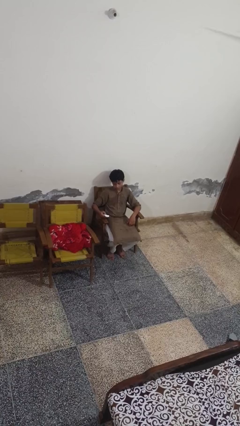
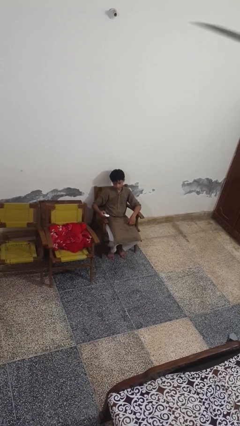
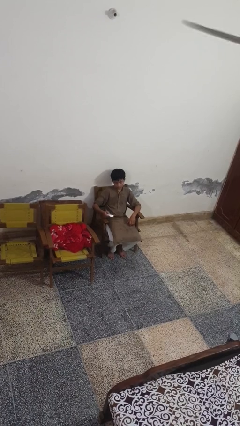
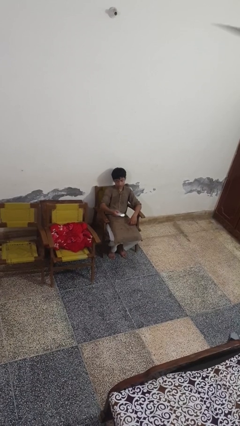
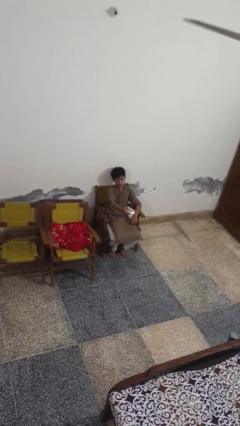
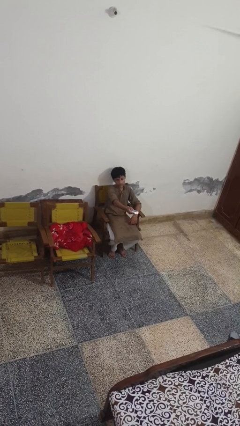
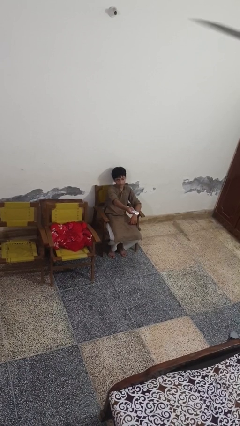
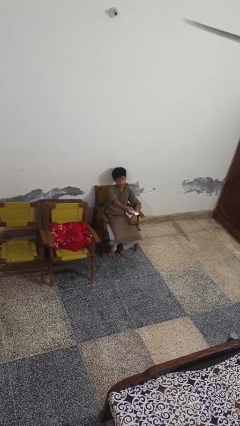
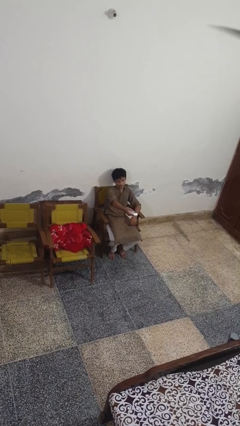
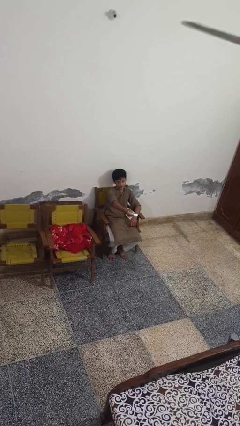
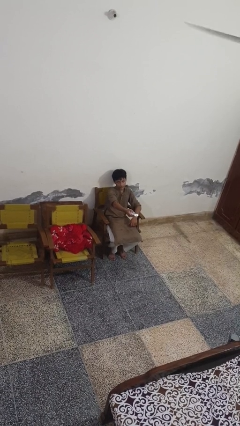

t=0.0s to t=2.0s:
person uses television remote

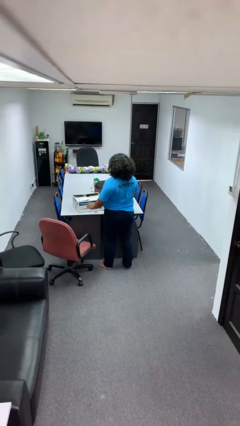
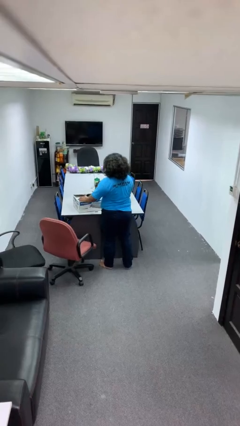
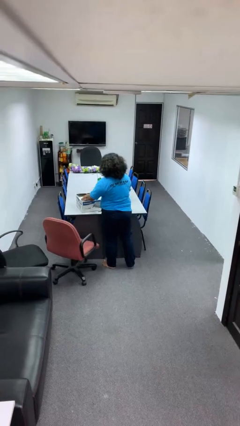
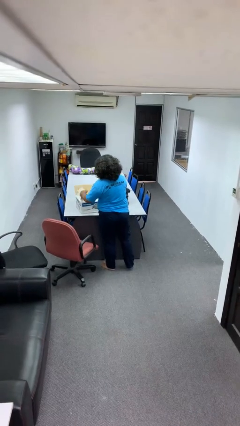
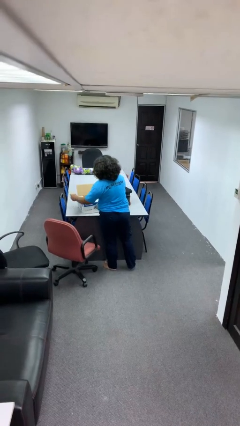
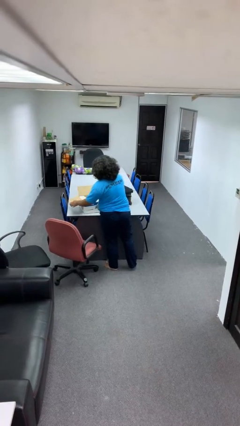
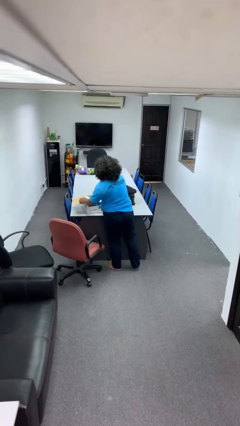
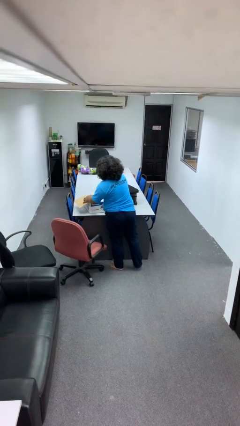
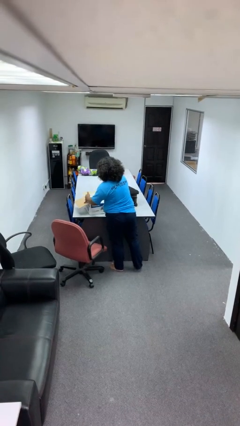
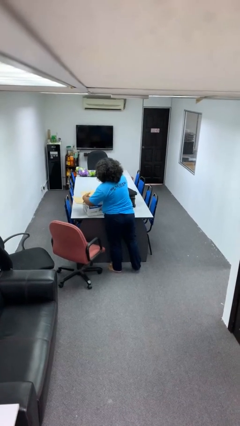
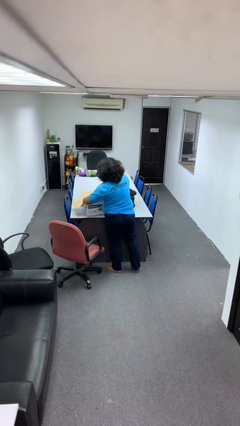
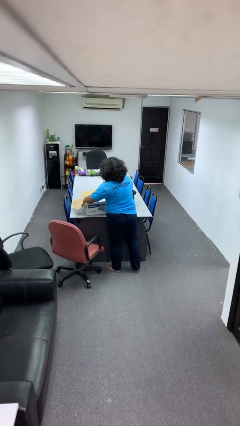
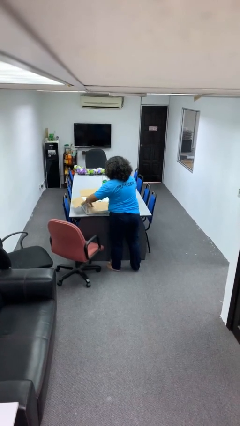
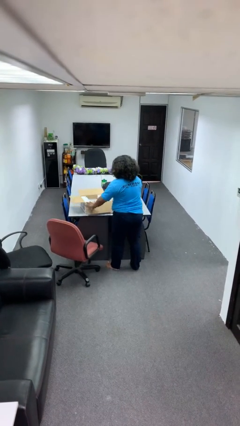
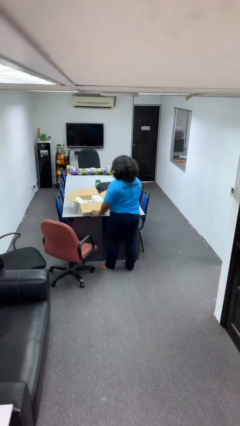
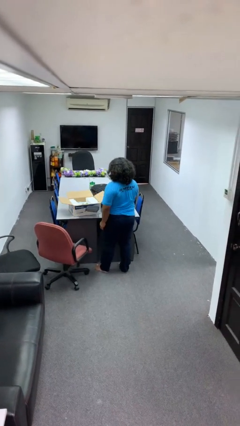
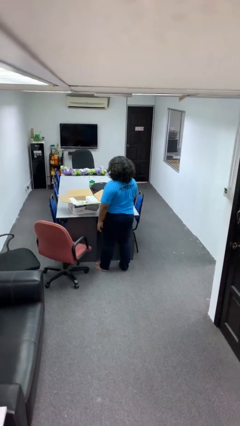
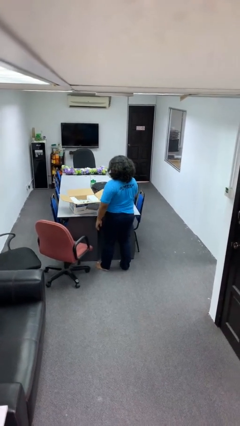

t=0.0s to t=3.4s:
person opens box

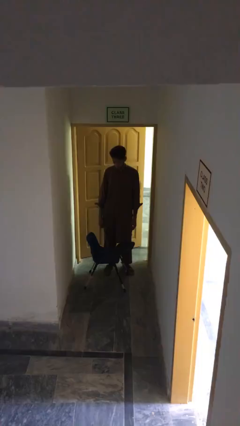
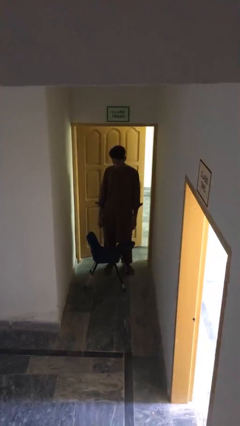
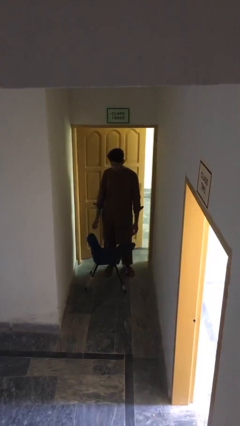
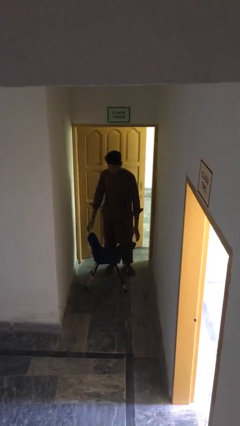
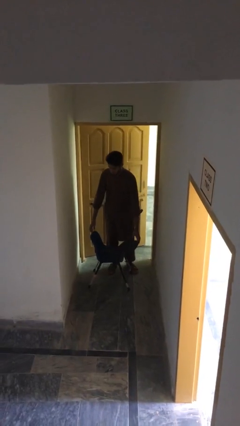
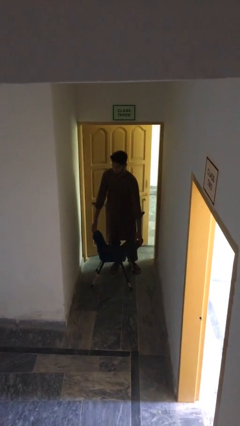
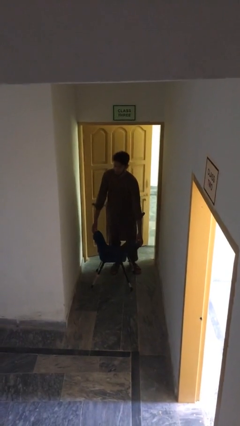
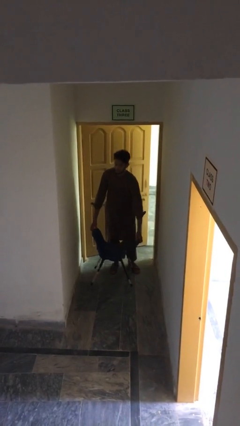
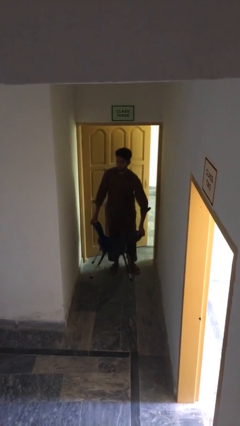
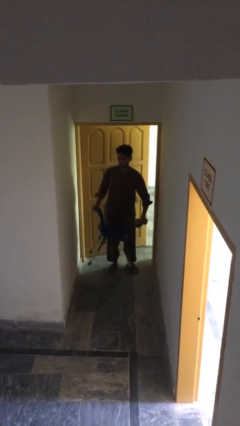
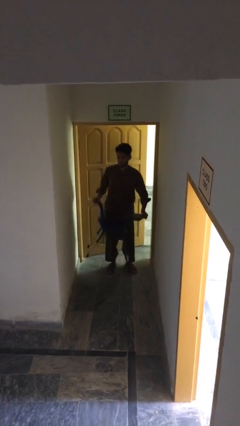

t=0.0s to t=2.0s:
person picks up object from floor

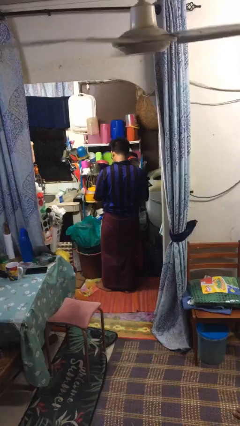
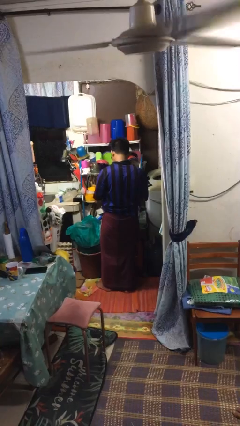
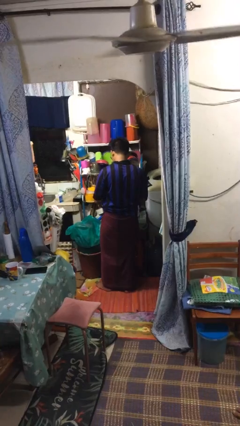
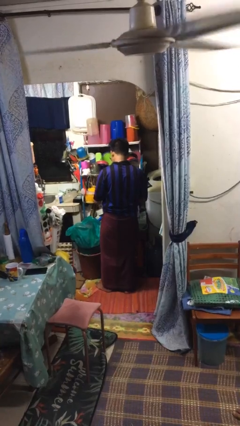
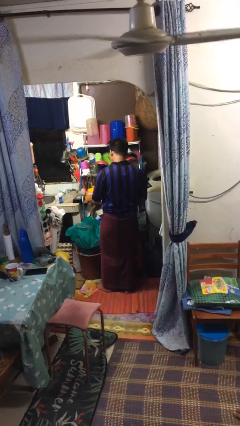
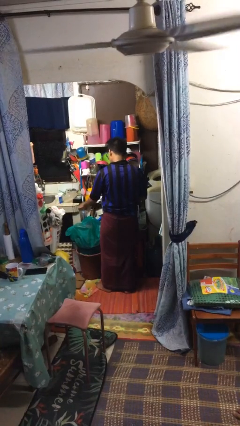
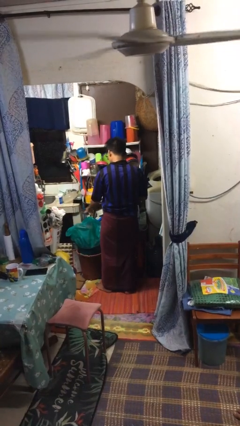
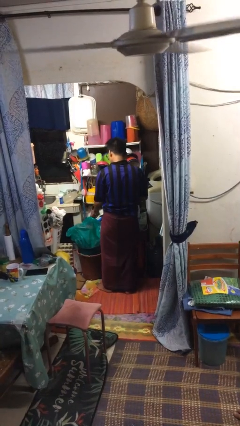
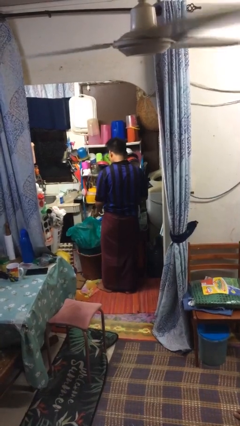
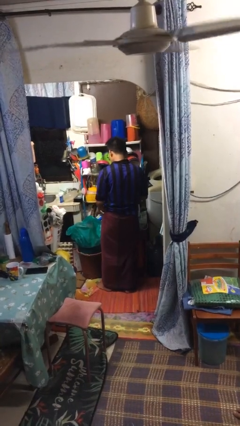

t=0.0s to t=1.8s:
person discards trash

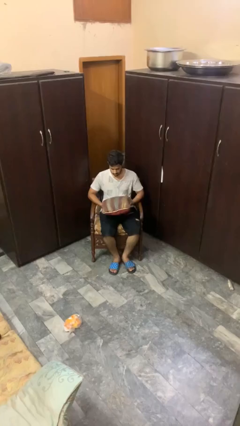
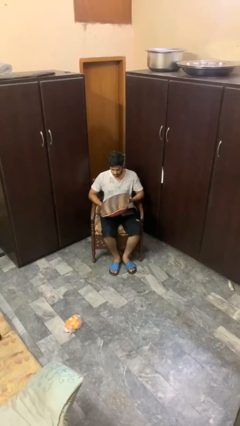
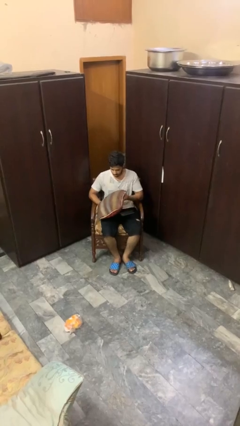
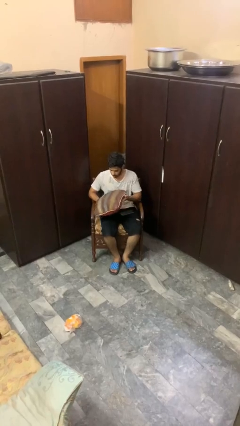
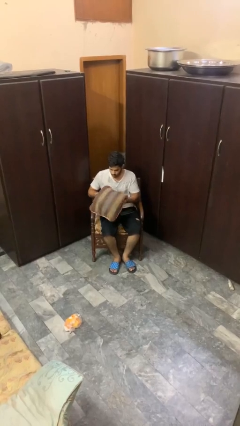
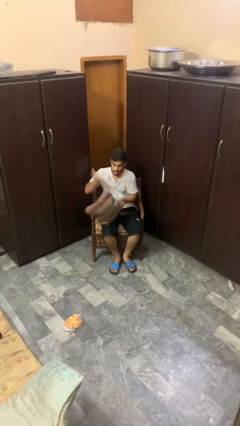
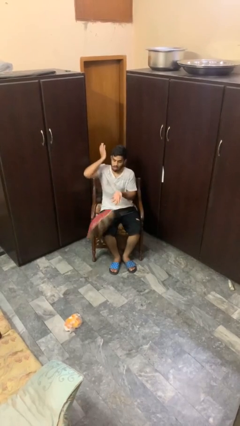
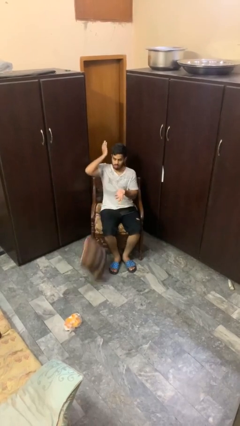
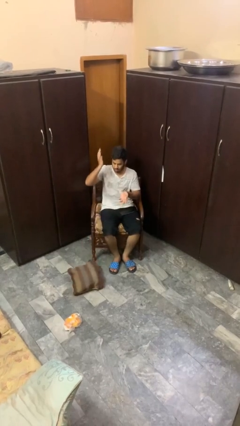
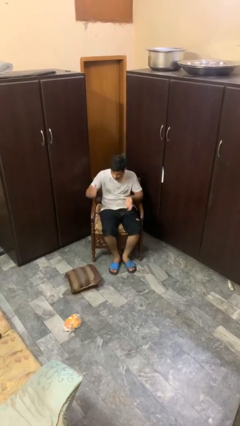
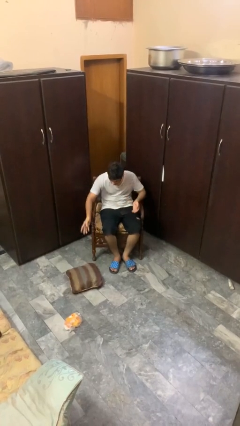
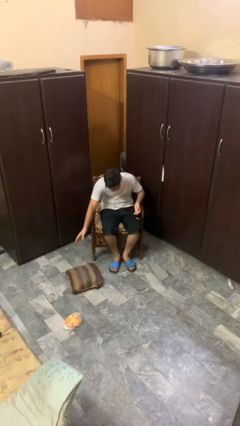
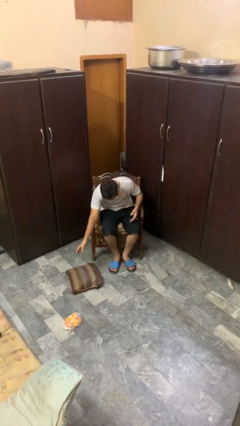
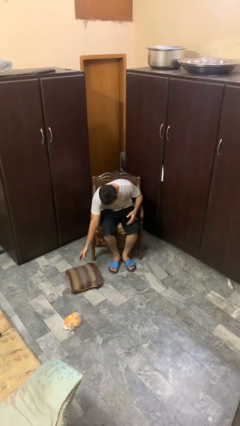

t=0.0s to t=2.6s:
person drops object

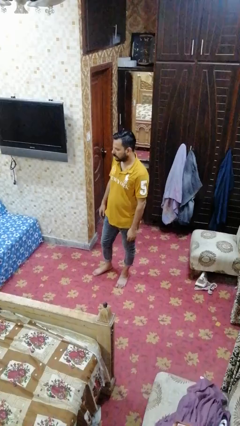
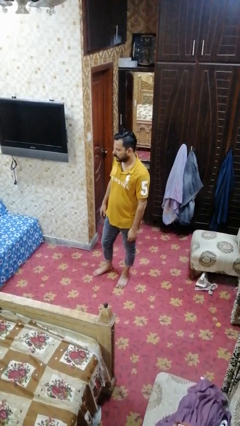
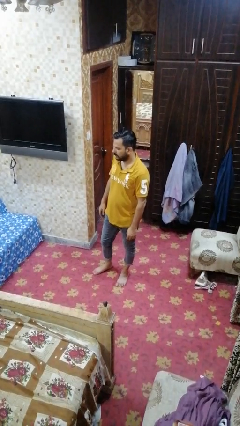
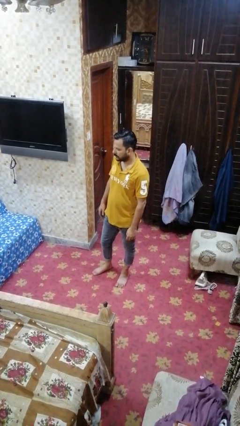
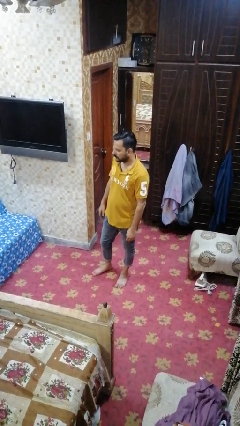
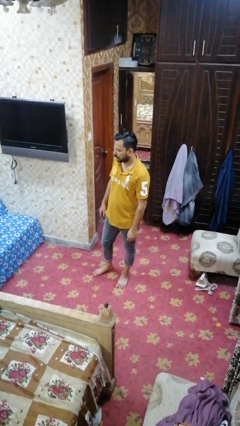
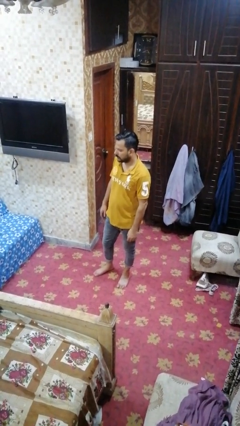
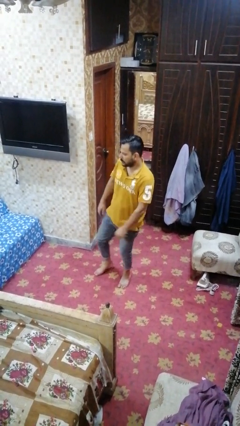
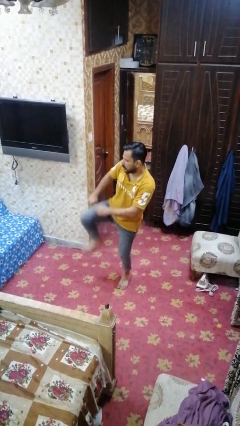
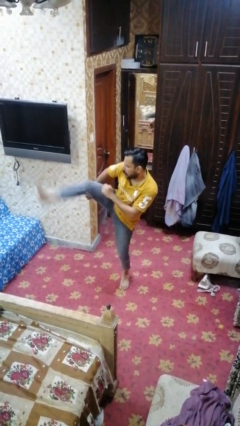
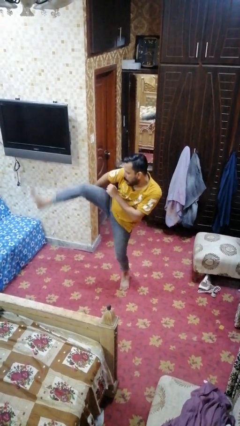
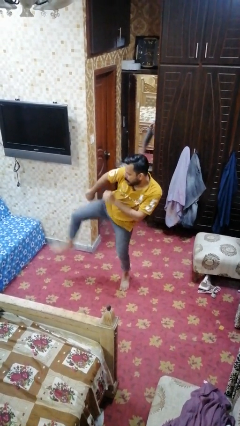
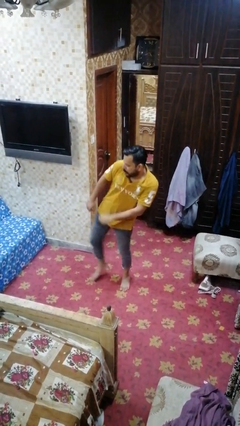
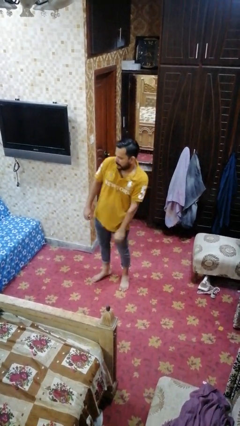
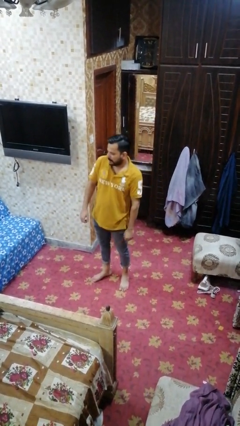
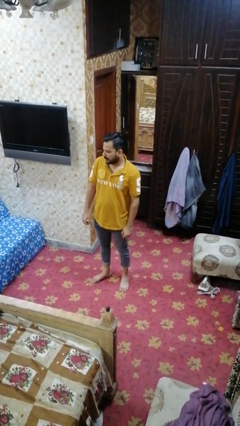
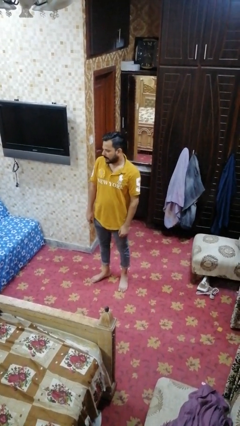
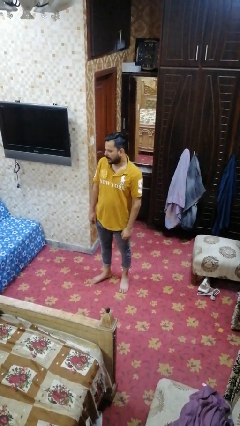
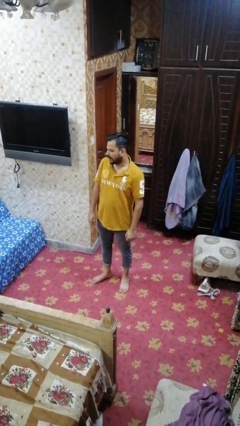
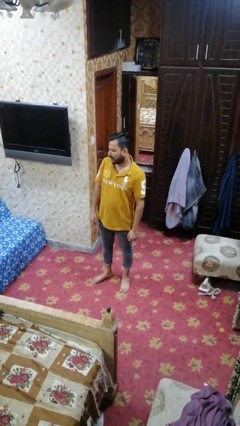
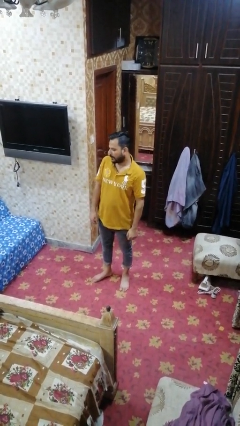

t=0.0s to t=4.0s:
person karate kicks

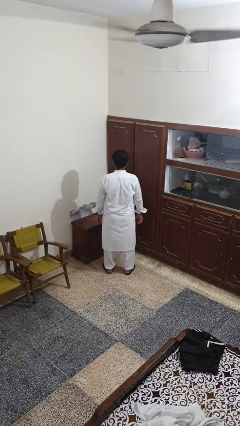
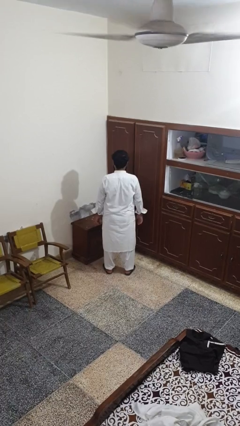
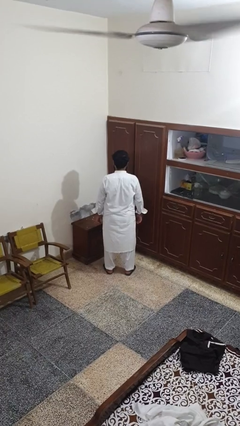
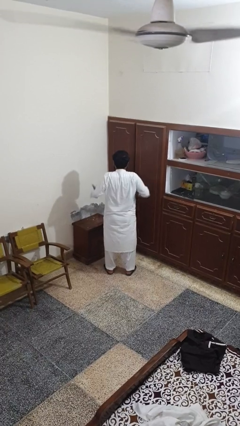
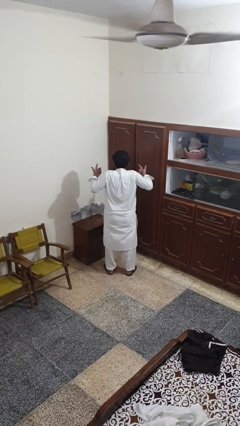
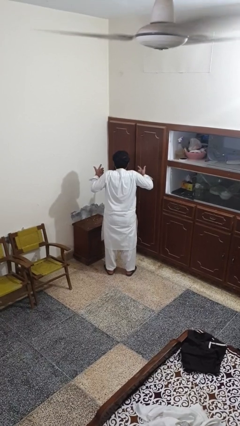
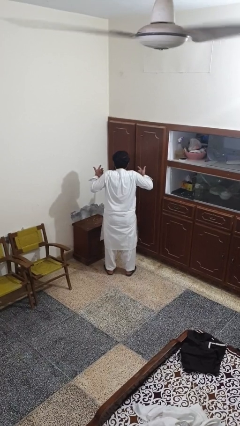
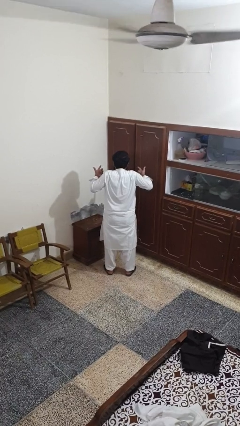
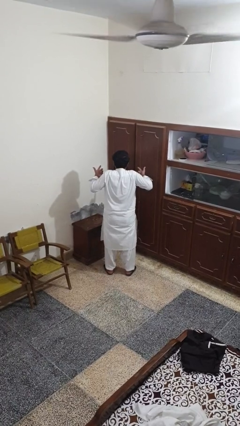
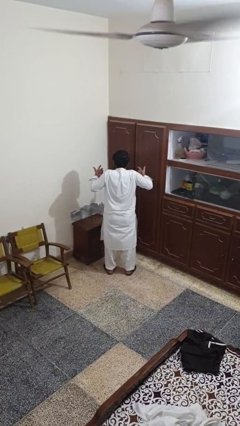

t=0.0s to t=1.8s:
person shrugs
